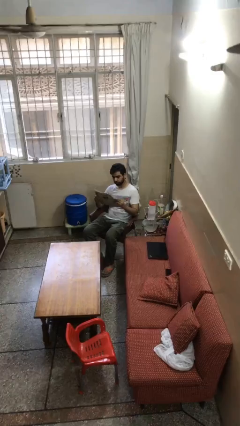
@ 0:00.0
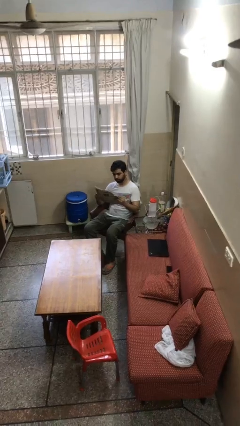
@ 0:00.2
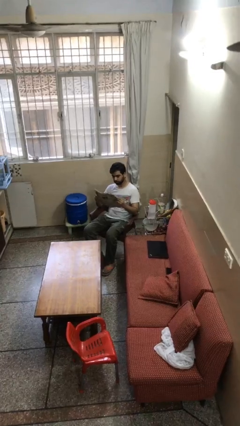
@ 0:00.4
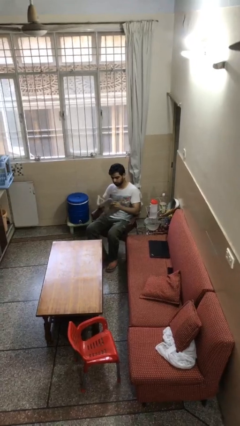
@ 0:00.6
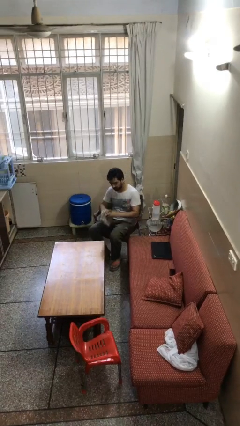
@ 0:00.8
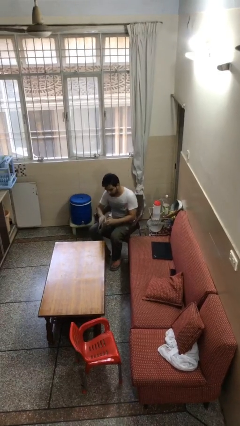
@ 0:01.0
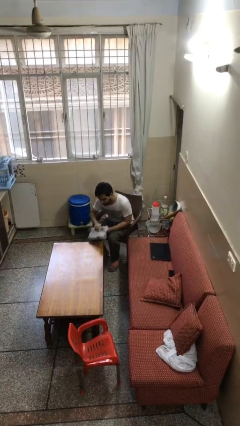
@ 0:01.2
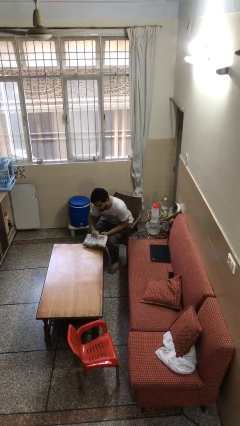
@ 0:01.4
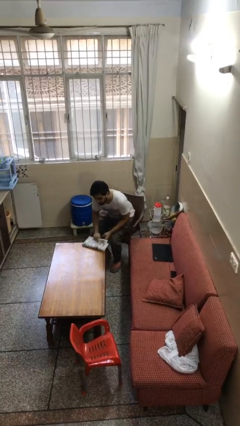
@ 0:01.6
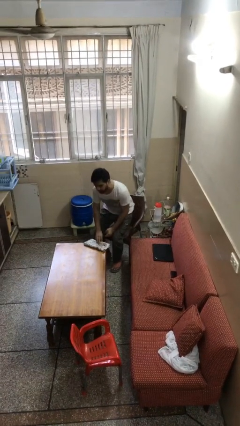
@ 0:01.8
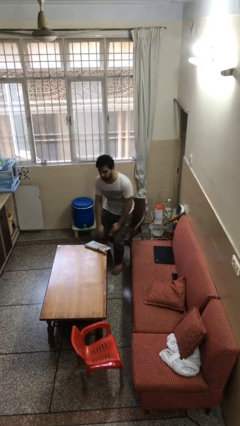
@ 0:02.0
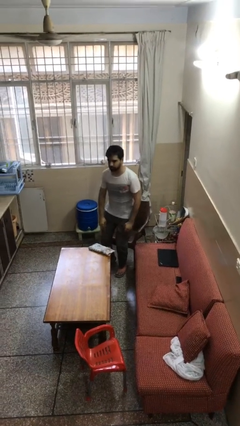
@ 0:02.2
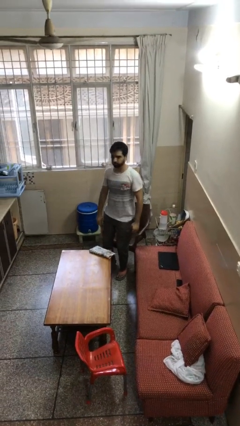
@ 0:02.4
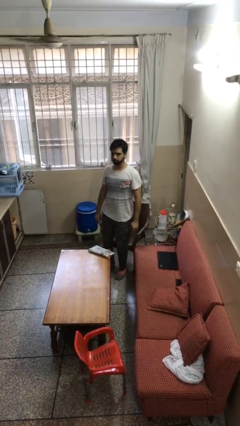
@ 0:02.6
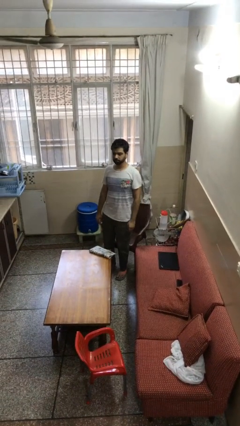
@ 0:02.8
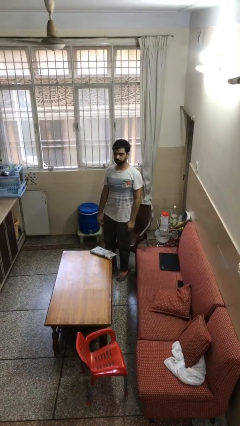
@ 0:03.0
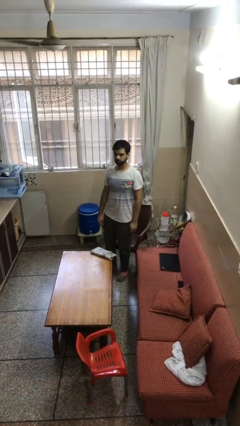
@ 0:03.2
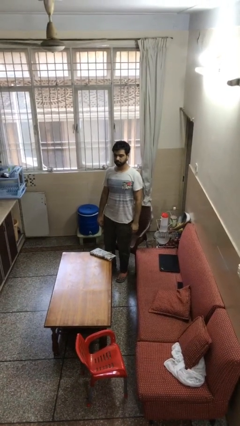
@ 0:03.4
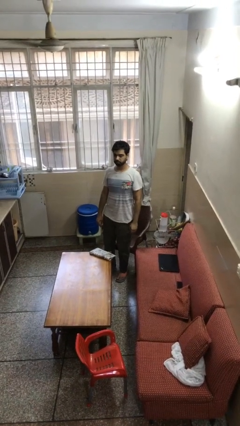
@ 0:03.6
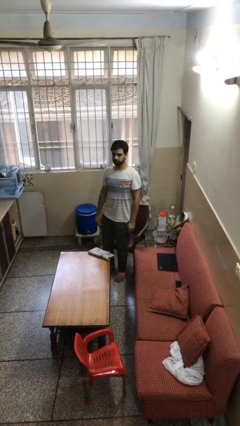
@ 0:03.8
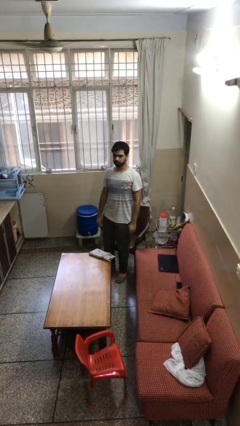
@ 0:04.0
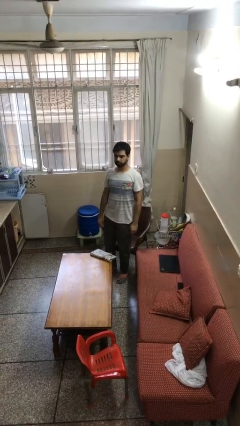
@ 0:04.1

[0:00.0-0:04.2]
person stands up

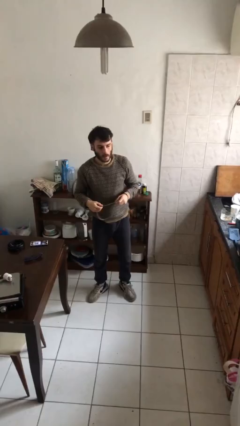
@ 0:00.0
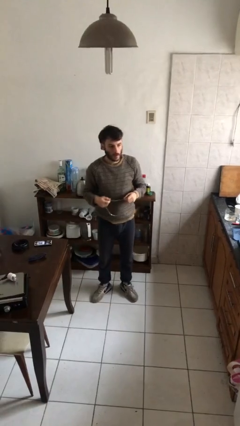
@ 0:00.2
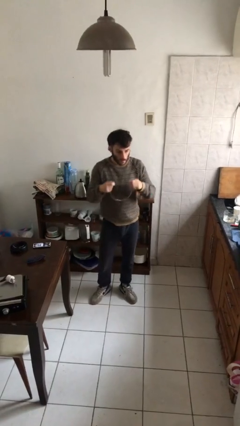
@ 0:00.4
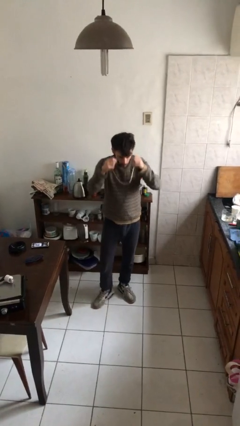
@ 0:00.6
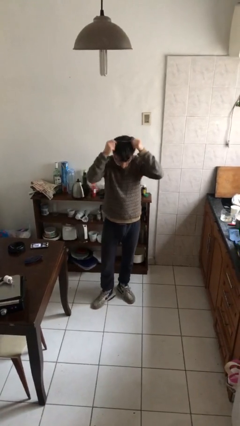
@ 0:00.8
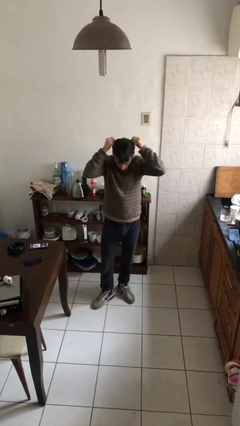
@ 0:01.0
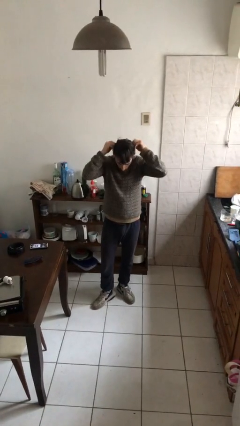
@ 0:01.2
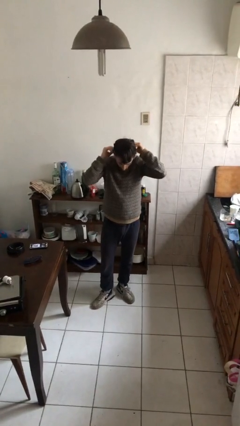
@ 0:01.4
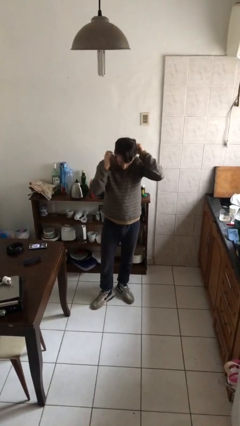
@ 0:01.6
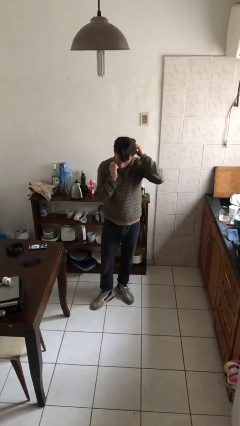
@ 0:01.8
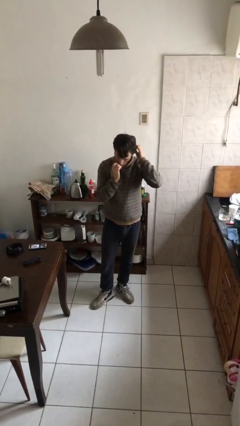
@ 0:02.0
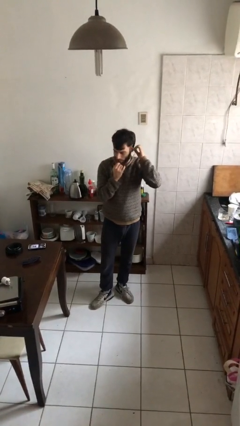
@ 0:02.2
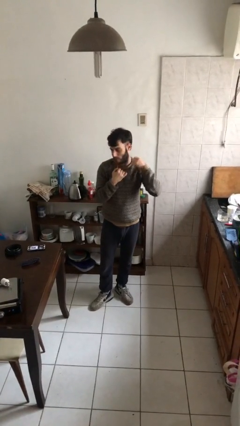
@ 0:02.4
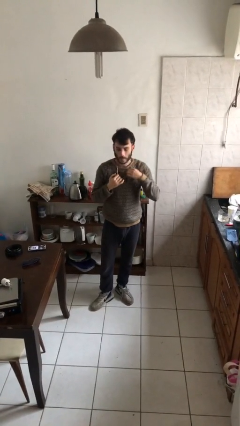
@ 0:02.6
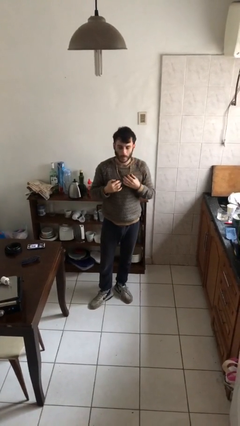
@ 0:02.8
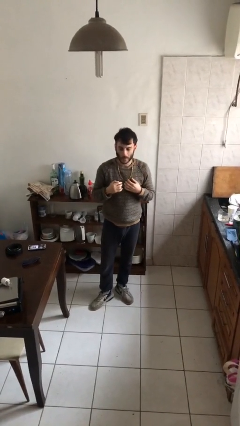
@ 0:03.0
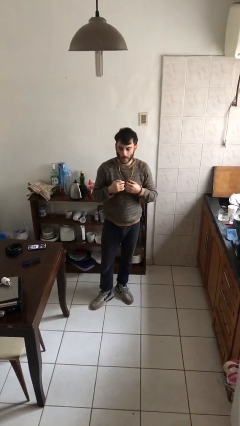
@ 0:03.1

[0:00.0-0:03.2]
person puts on necklace

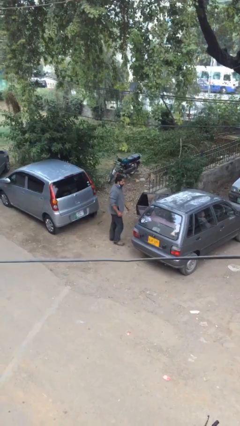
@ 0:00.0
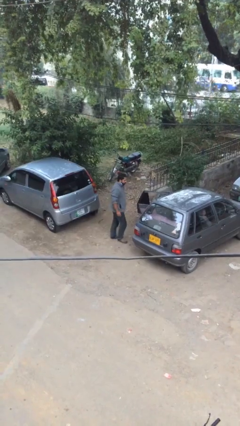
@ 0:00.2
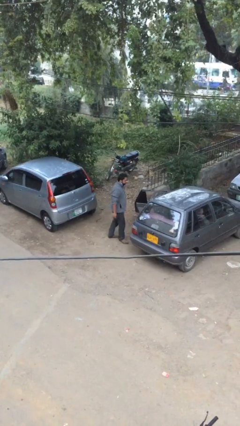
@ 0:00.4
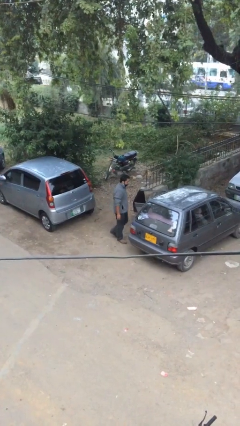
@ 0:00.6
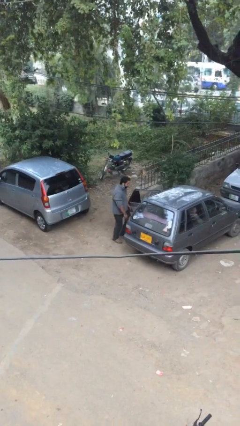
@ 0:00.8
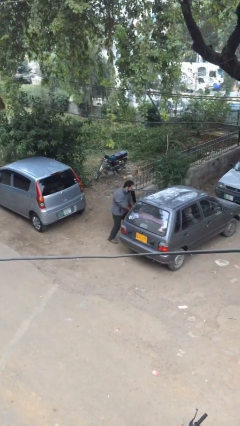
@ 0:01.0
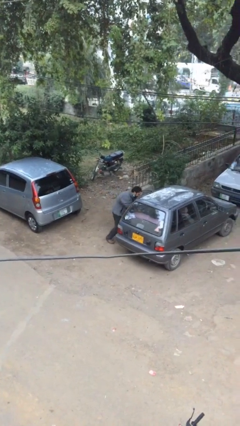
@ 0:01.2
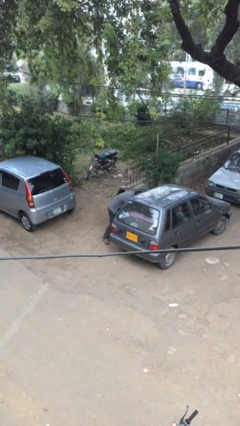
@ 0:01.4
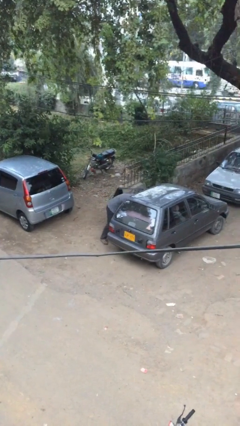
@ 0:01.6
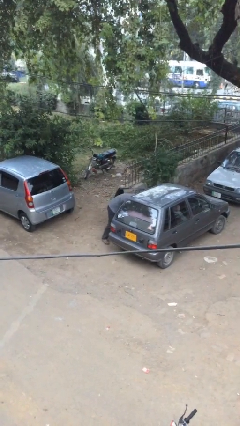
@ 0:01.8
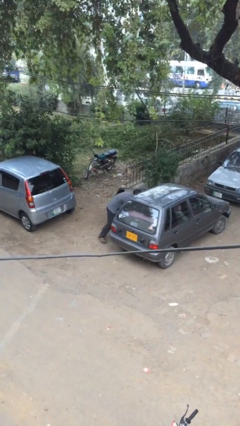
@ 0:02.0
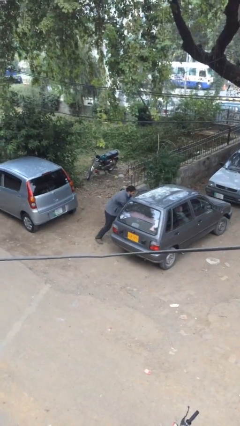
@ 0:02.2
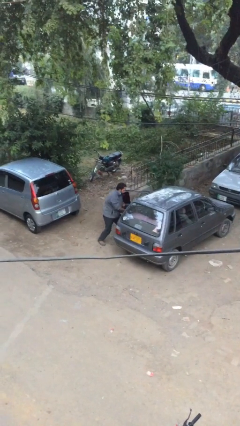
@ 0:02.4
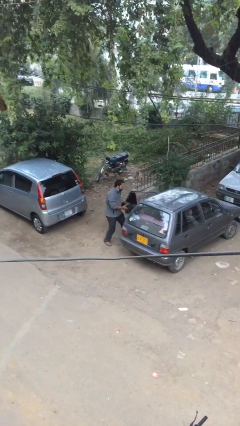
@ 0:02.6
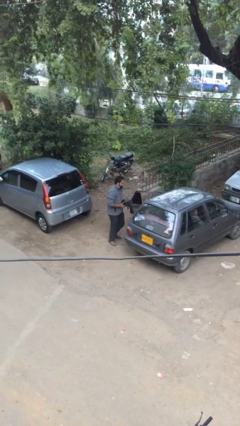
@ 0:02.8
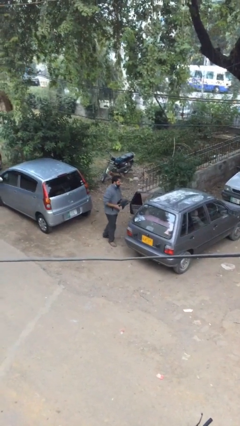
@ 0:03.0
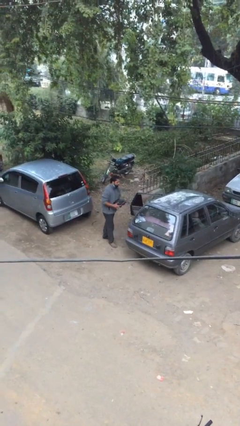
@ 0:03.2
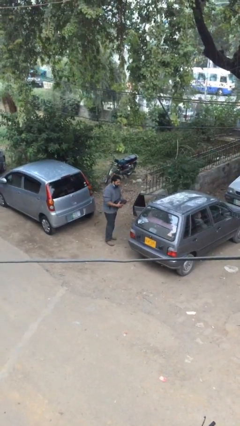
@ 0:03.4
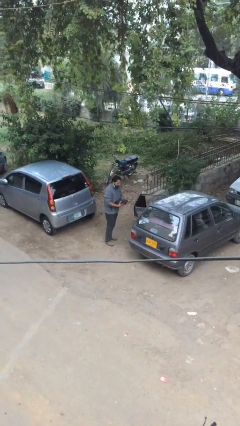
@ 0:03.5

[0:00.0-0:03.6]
person unloads car

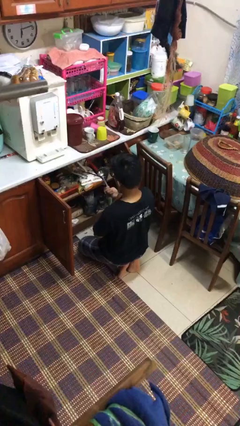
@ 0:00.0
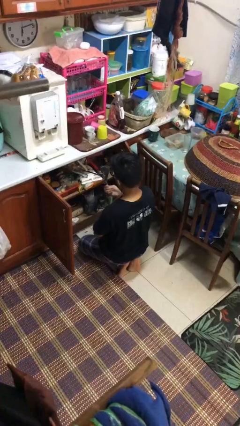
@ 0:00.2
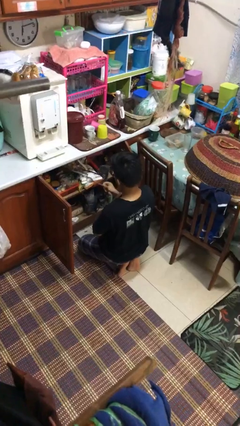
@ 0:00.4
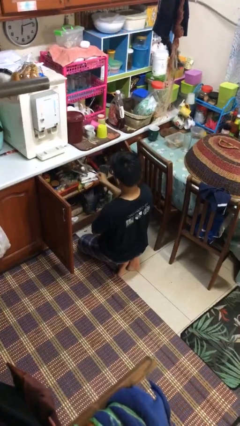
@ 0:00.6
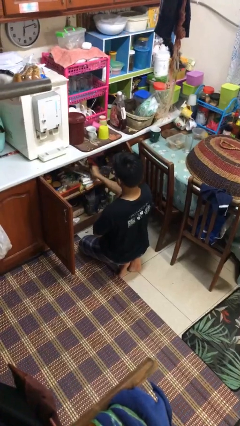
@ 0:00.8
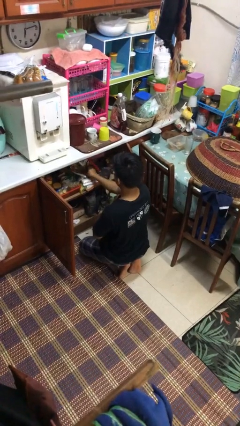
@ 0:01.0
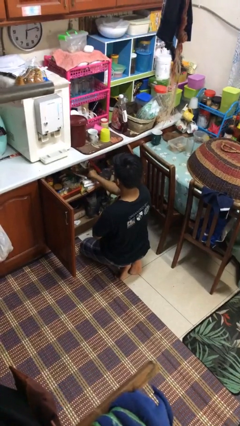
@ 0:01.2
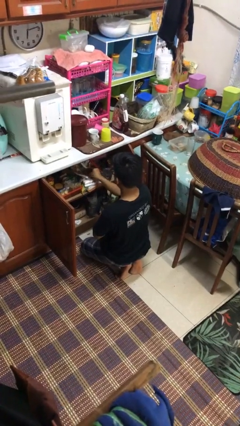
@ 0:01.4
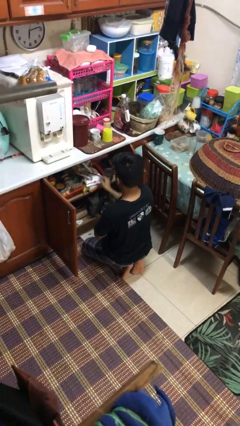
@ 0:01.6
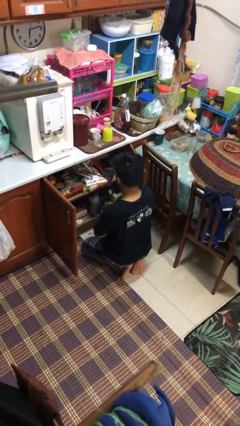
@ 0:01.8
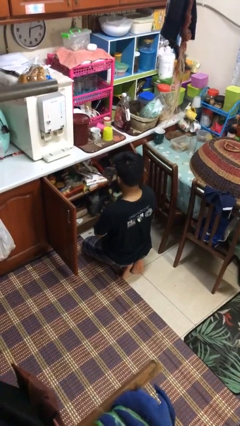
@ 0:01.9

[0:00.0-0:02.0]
person puts object into kitchen drawer

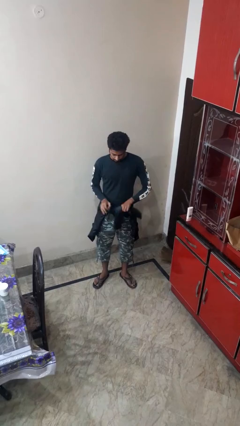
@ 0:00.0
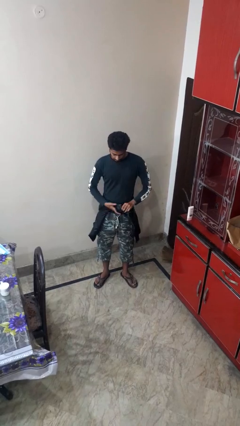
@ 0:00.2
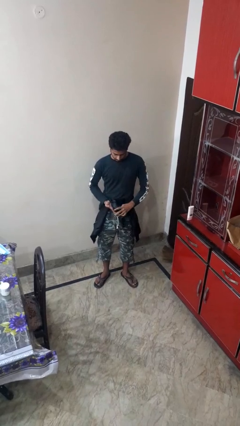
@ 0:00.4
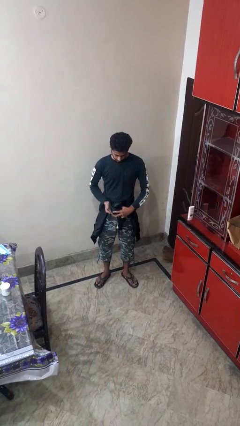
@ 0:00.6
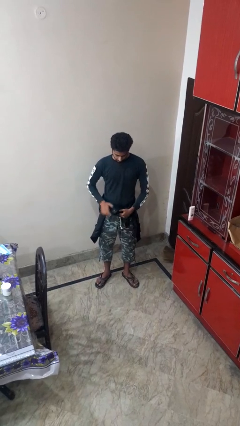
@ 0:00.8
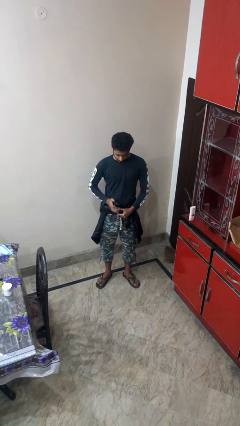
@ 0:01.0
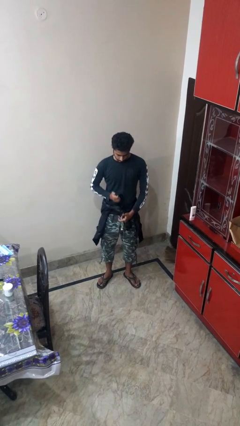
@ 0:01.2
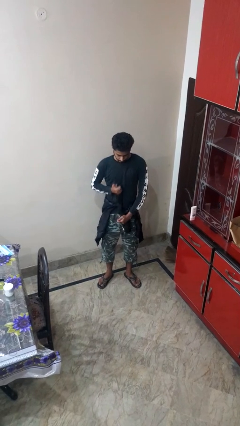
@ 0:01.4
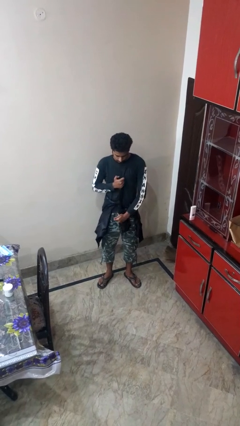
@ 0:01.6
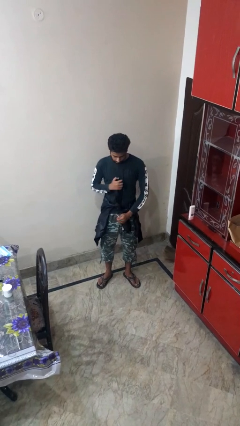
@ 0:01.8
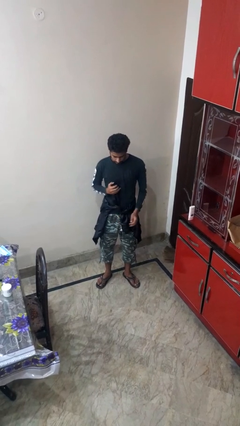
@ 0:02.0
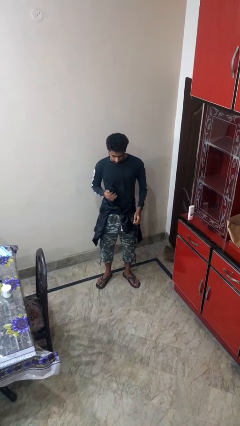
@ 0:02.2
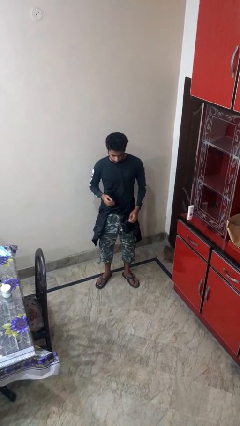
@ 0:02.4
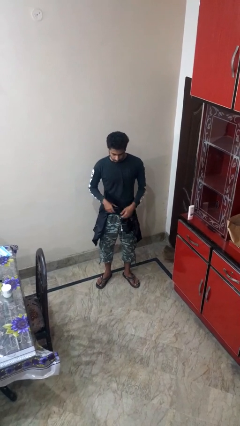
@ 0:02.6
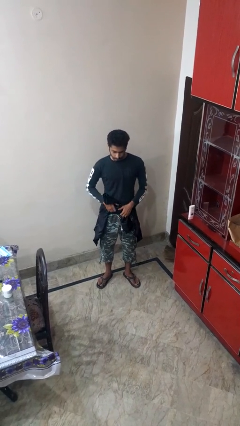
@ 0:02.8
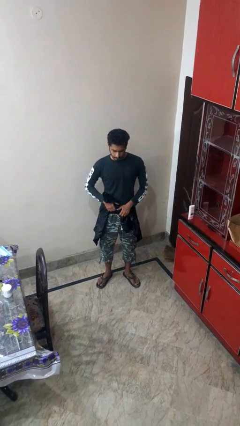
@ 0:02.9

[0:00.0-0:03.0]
person ties jacket around waist

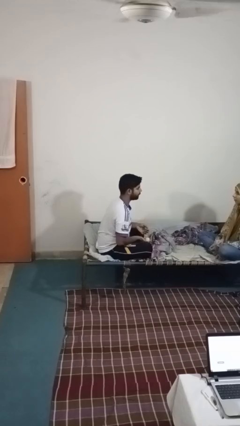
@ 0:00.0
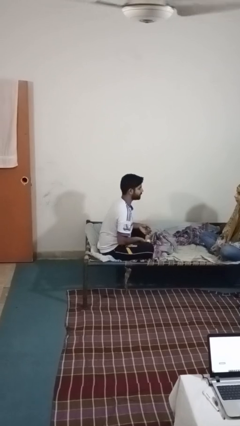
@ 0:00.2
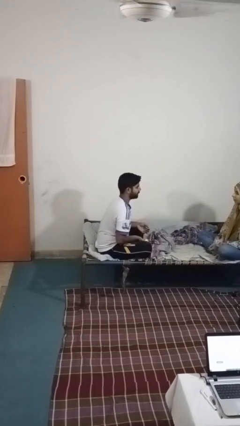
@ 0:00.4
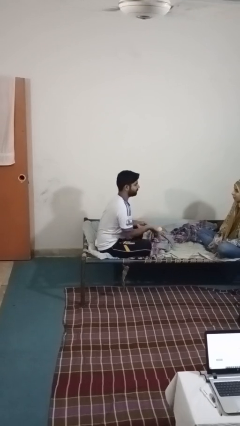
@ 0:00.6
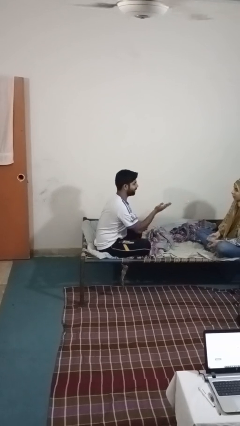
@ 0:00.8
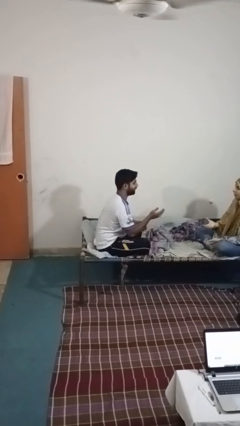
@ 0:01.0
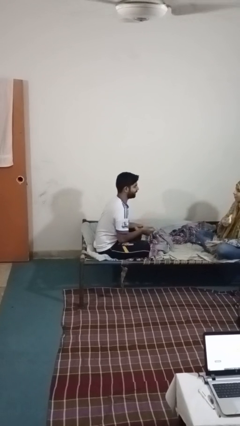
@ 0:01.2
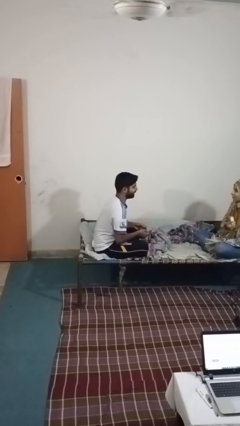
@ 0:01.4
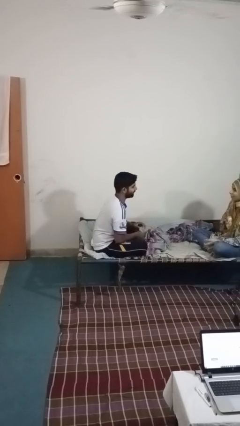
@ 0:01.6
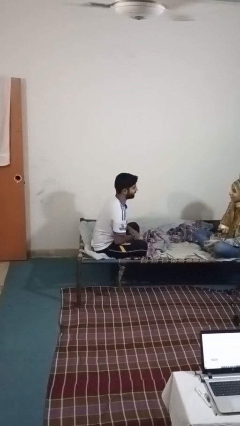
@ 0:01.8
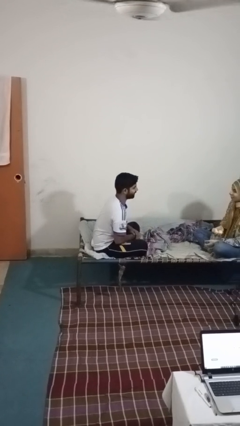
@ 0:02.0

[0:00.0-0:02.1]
person throws object to person
